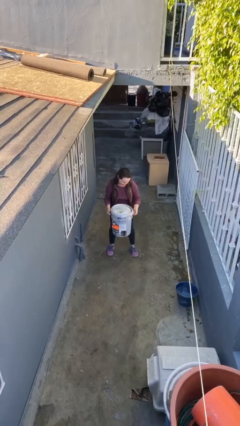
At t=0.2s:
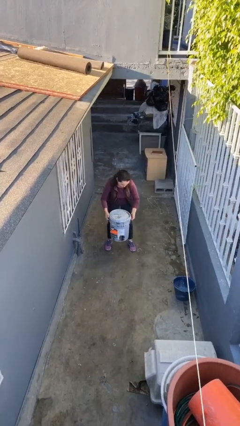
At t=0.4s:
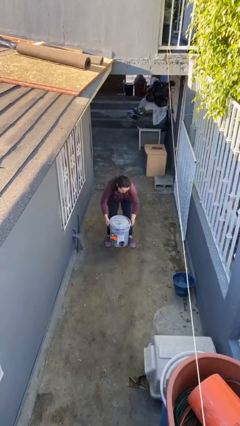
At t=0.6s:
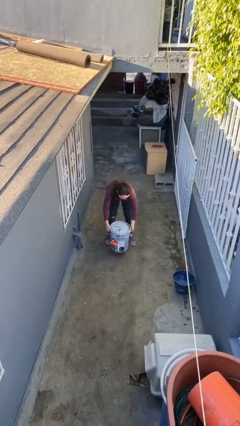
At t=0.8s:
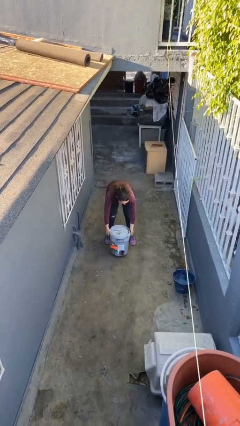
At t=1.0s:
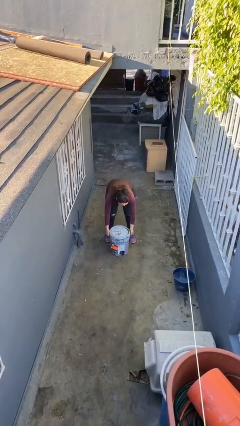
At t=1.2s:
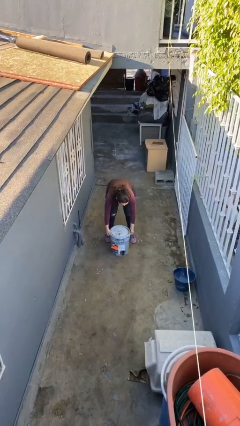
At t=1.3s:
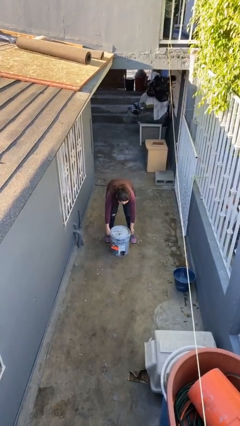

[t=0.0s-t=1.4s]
person puts down object on floor

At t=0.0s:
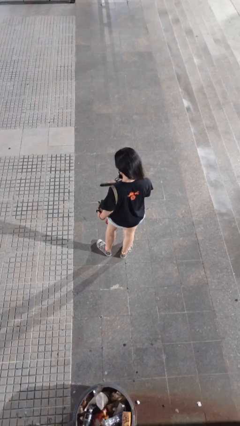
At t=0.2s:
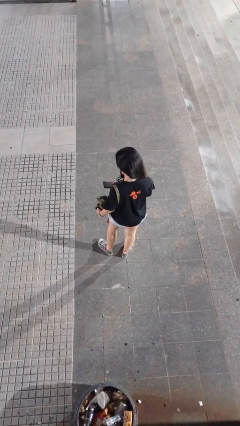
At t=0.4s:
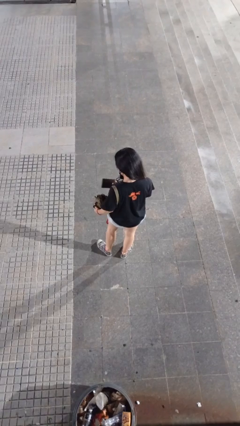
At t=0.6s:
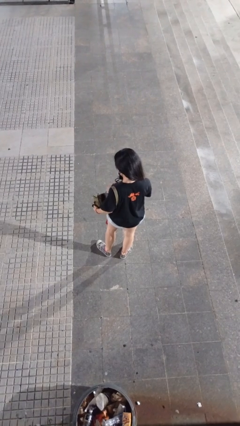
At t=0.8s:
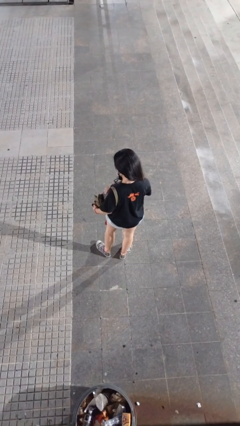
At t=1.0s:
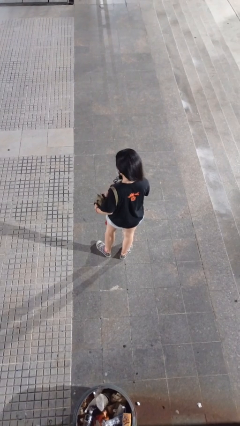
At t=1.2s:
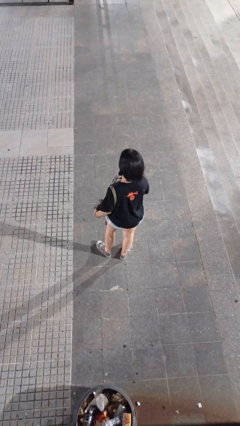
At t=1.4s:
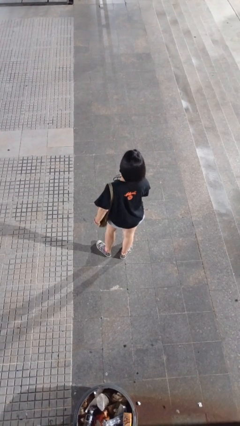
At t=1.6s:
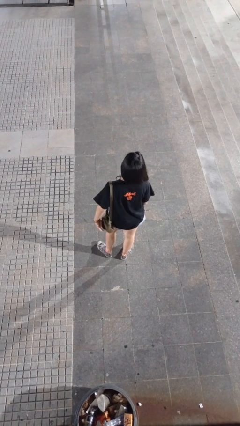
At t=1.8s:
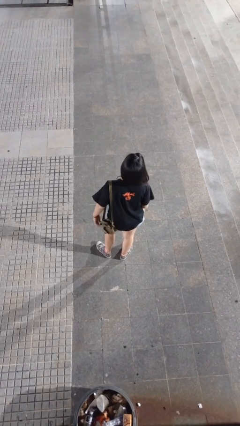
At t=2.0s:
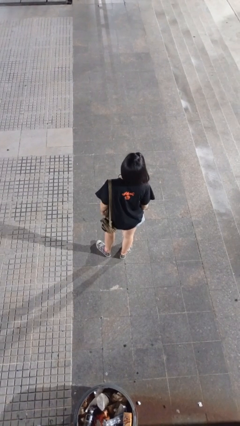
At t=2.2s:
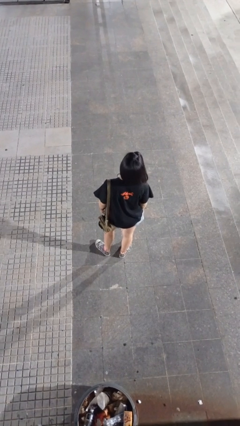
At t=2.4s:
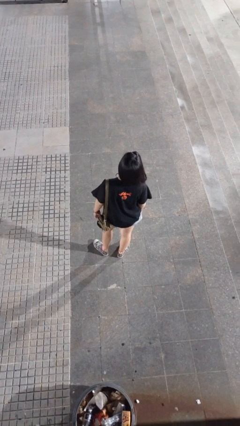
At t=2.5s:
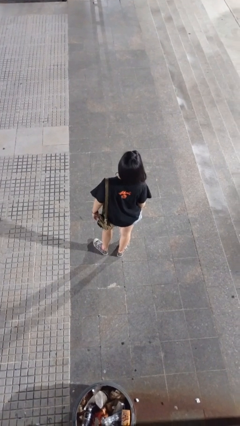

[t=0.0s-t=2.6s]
person puts object into purse

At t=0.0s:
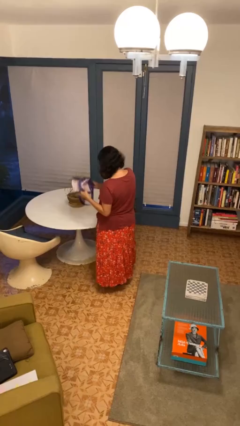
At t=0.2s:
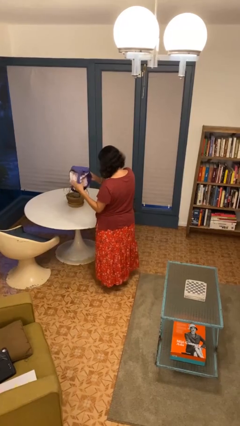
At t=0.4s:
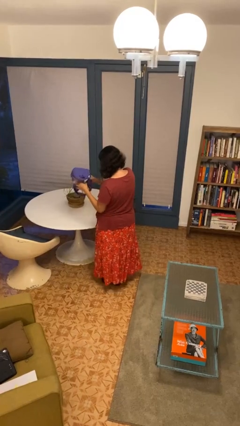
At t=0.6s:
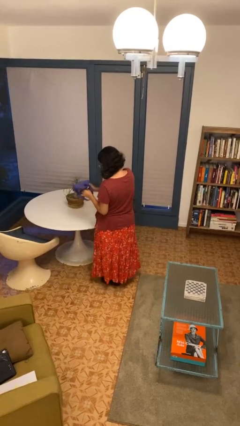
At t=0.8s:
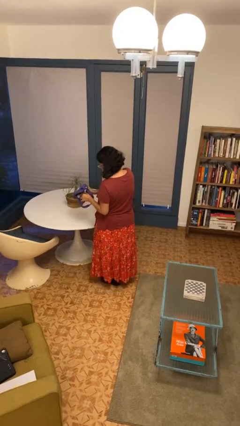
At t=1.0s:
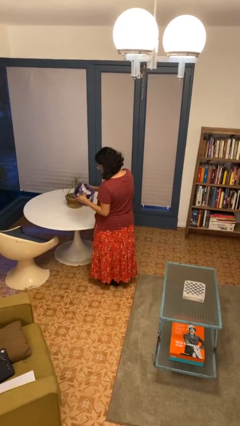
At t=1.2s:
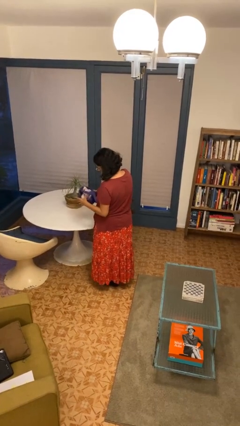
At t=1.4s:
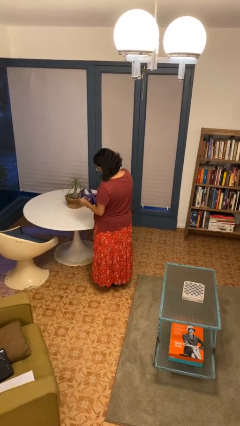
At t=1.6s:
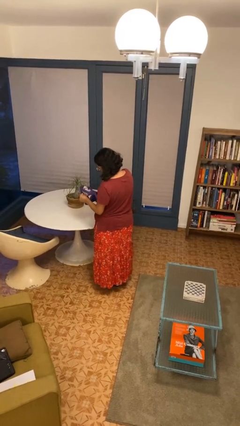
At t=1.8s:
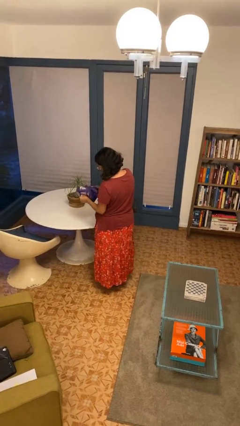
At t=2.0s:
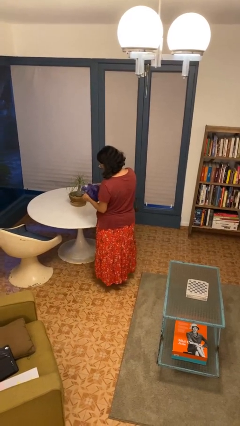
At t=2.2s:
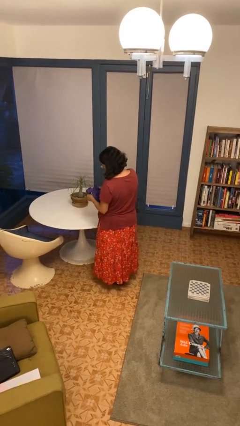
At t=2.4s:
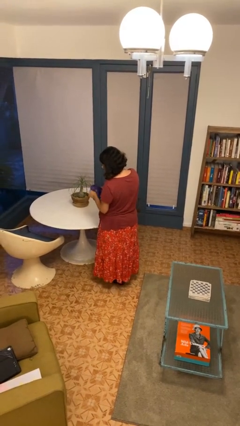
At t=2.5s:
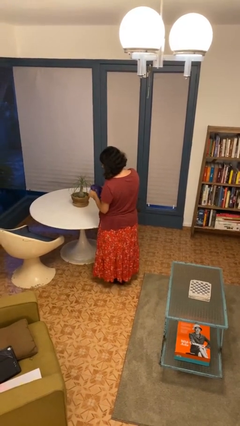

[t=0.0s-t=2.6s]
person squeezes object

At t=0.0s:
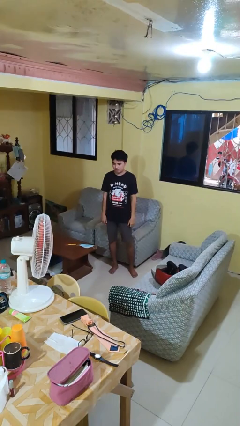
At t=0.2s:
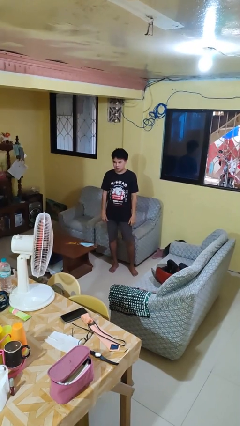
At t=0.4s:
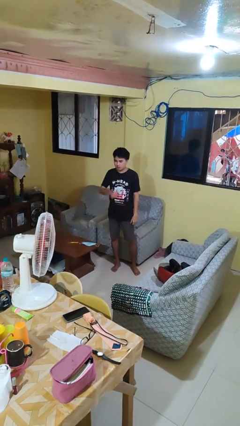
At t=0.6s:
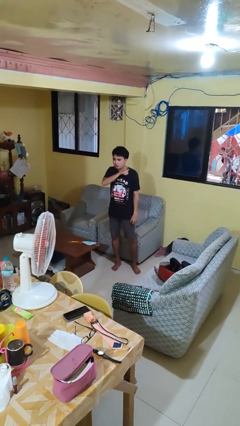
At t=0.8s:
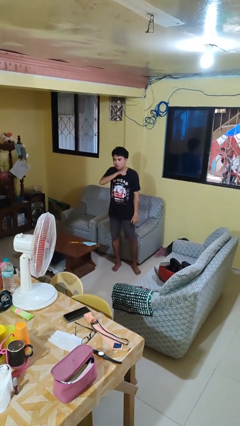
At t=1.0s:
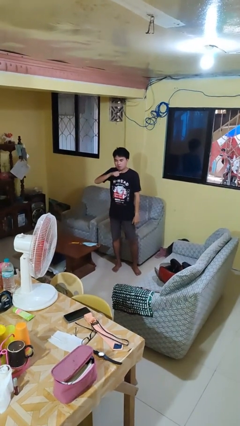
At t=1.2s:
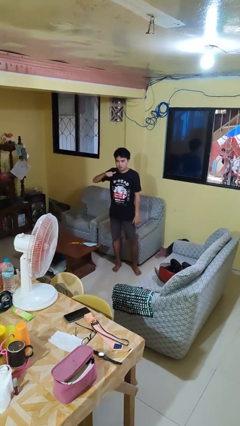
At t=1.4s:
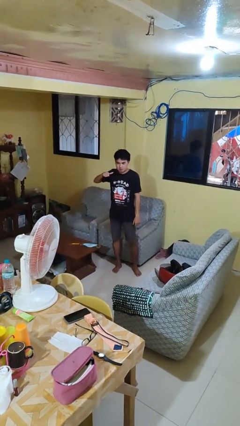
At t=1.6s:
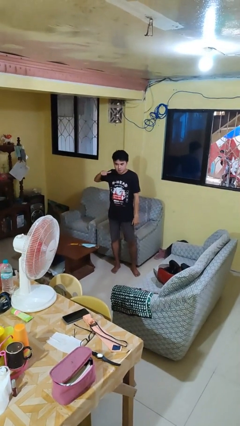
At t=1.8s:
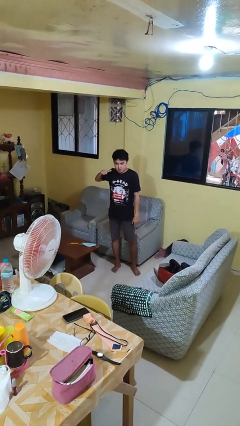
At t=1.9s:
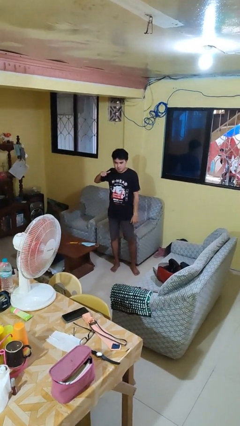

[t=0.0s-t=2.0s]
person gestures cut

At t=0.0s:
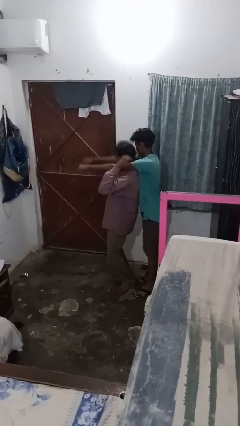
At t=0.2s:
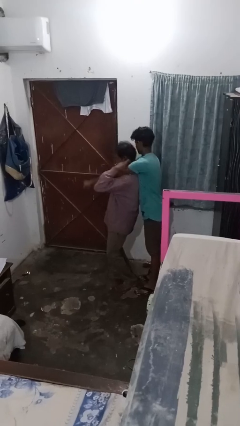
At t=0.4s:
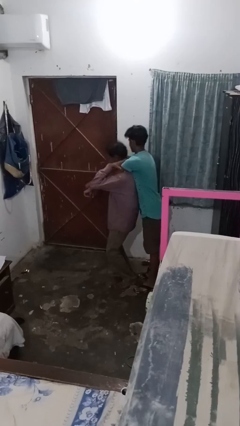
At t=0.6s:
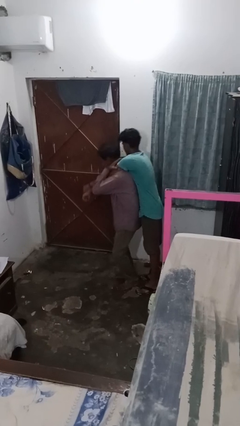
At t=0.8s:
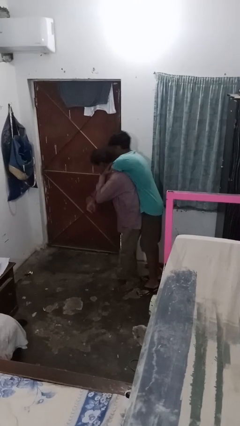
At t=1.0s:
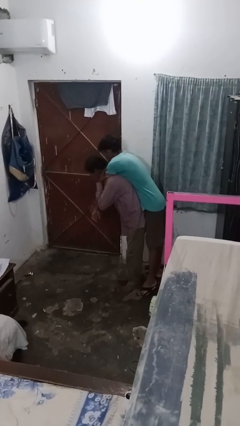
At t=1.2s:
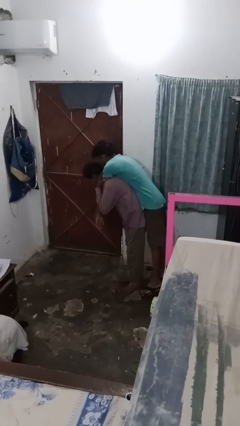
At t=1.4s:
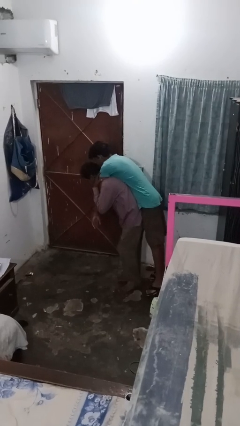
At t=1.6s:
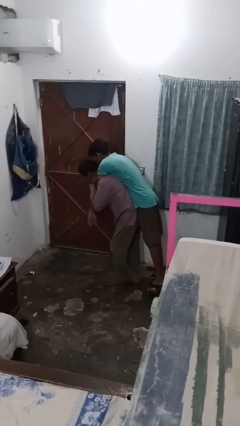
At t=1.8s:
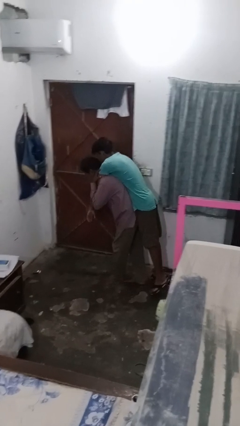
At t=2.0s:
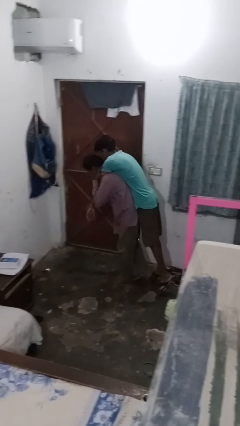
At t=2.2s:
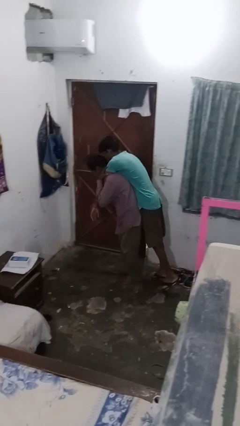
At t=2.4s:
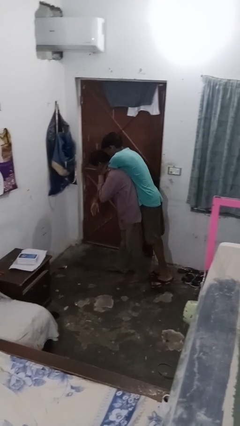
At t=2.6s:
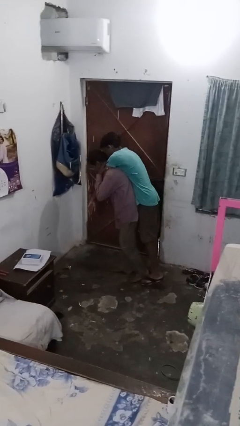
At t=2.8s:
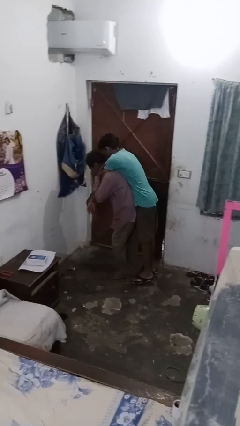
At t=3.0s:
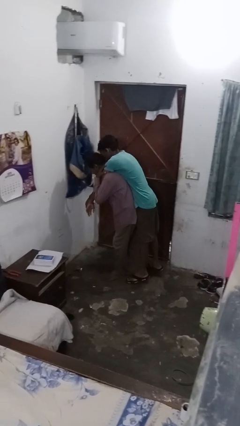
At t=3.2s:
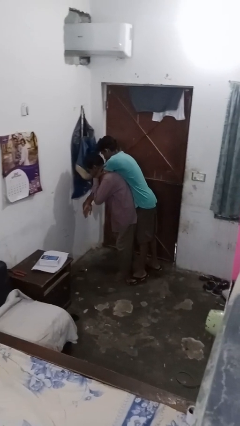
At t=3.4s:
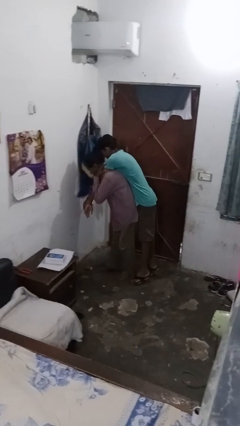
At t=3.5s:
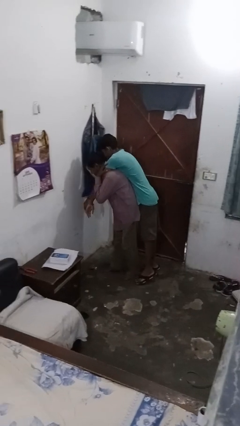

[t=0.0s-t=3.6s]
person carries person on back

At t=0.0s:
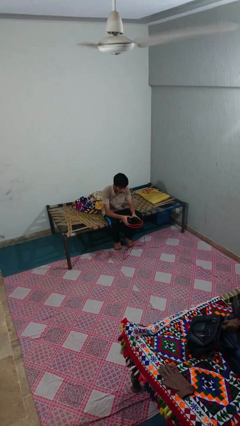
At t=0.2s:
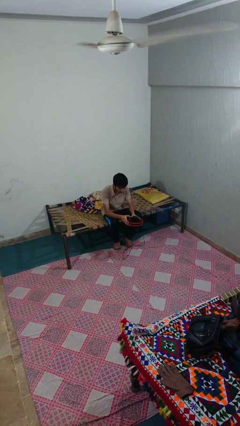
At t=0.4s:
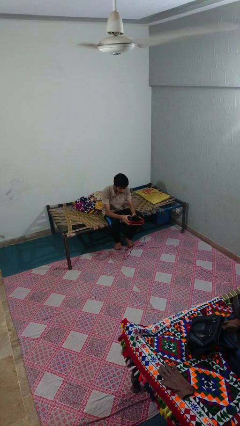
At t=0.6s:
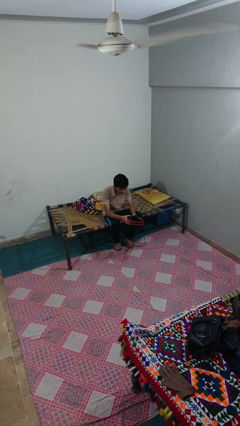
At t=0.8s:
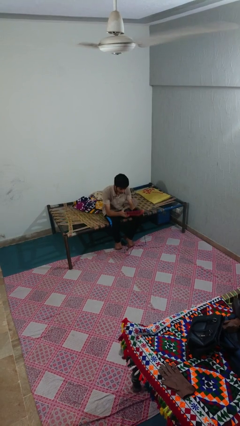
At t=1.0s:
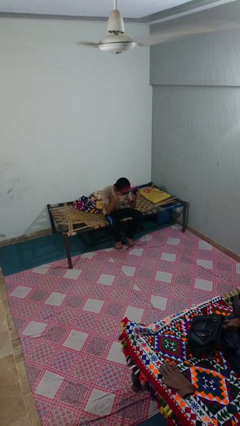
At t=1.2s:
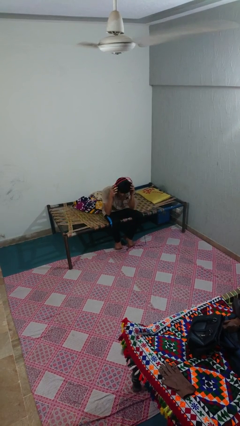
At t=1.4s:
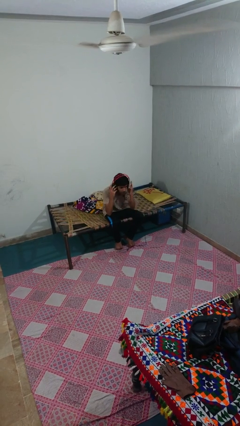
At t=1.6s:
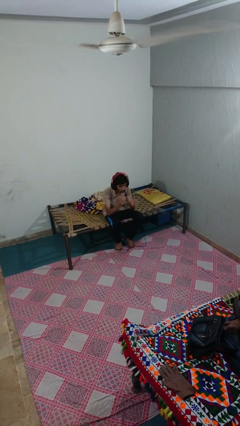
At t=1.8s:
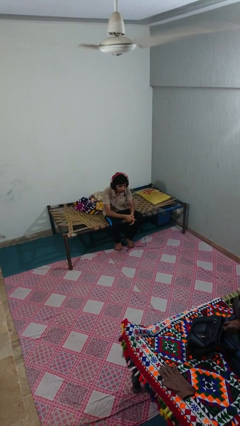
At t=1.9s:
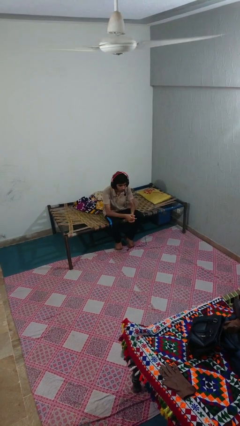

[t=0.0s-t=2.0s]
person puts on headphones

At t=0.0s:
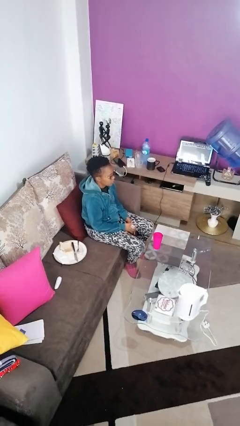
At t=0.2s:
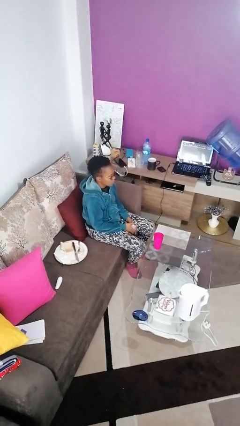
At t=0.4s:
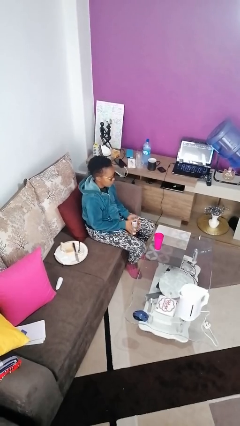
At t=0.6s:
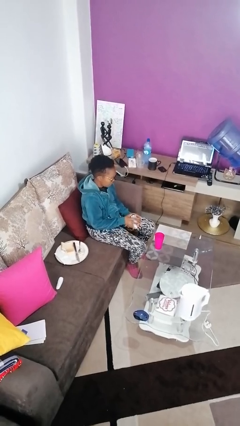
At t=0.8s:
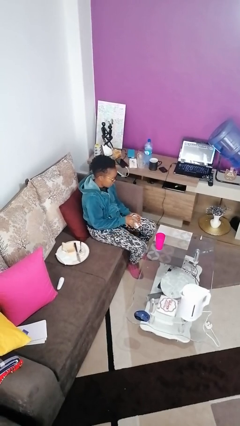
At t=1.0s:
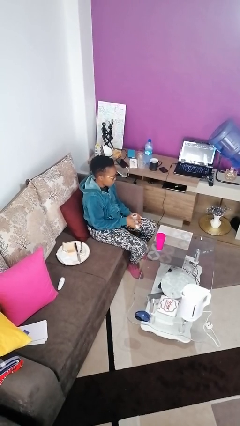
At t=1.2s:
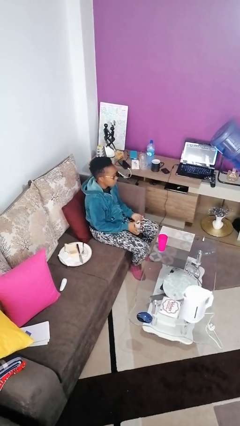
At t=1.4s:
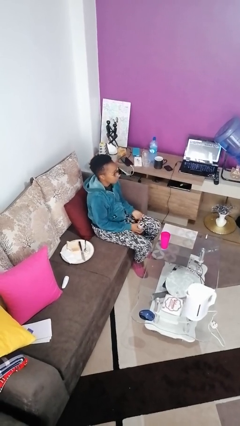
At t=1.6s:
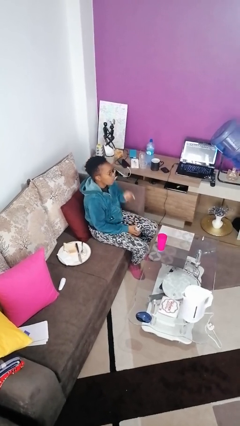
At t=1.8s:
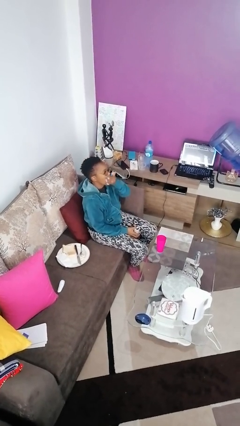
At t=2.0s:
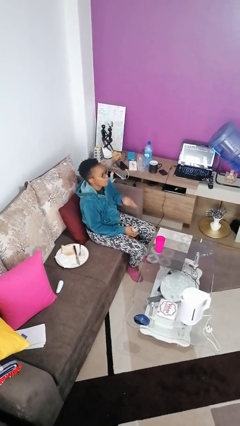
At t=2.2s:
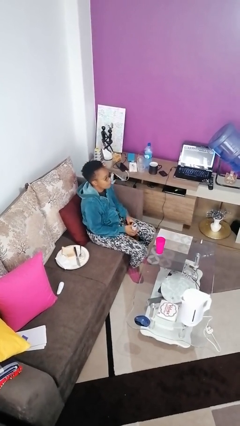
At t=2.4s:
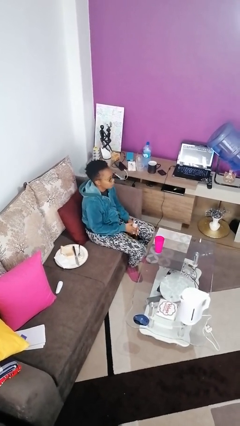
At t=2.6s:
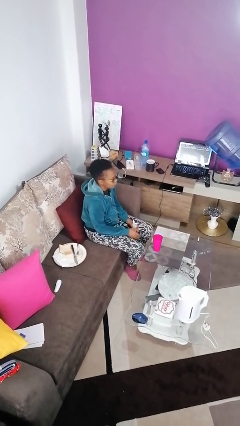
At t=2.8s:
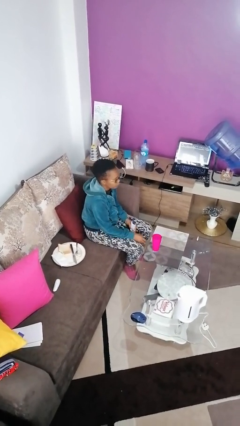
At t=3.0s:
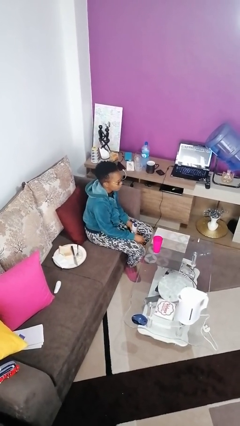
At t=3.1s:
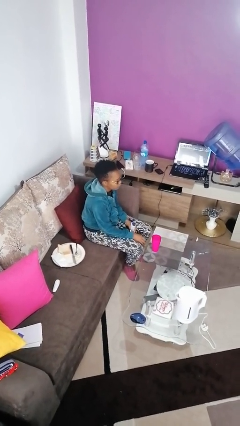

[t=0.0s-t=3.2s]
person takes medicine pills
